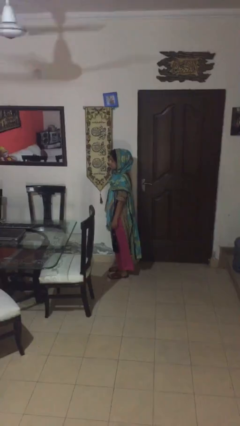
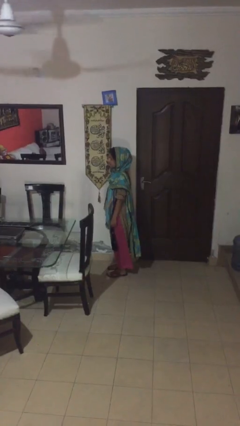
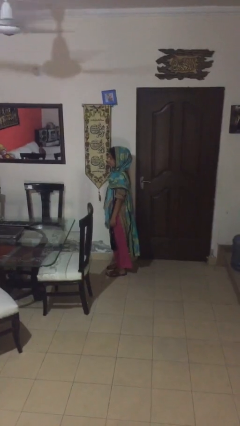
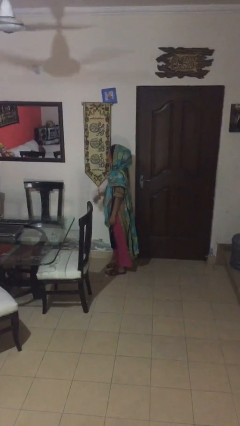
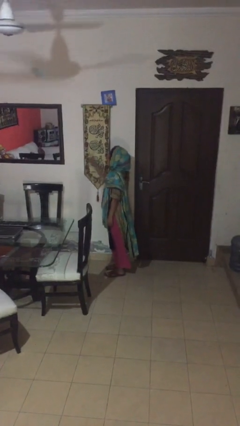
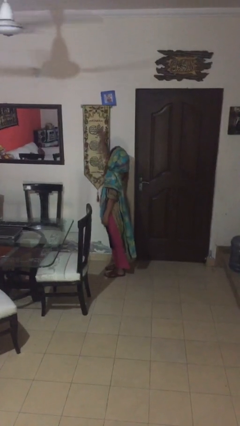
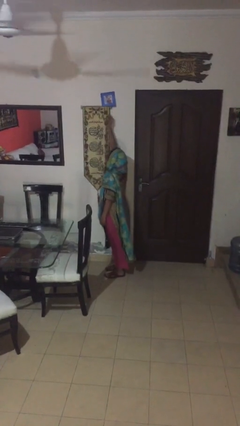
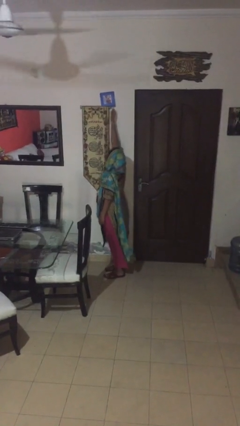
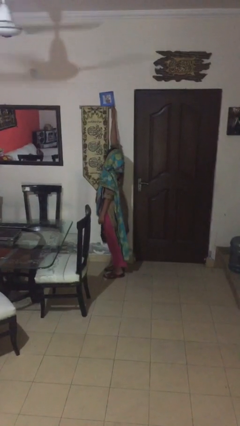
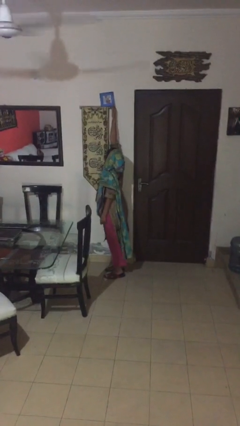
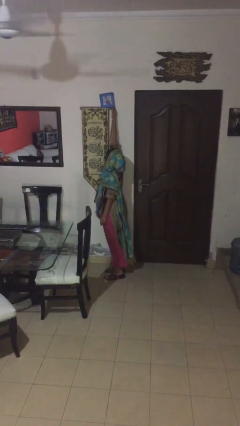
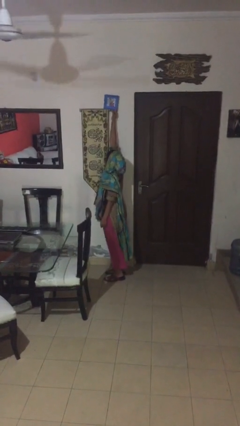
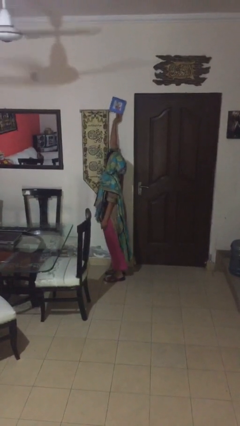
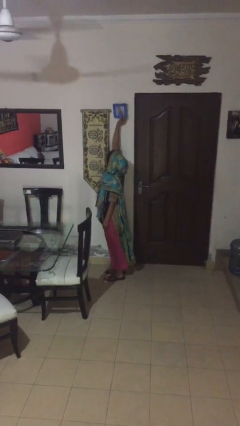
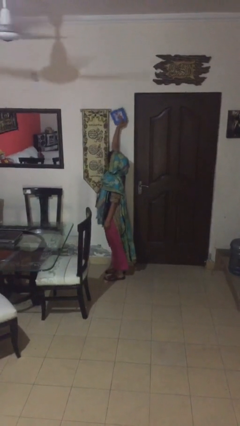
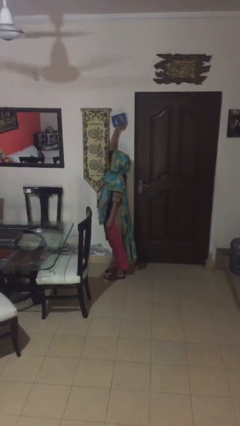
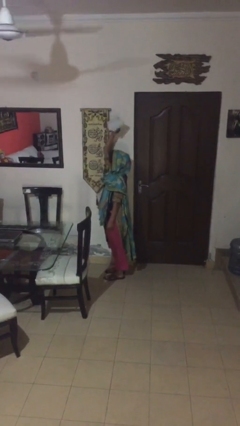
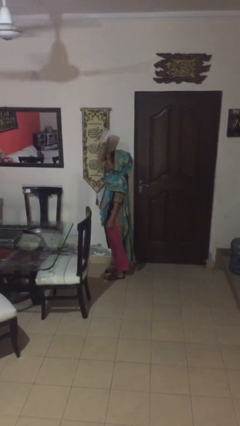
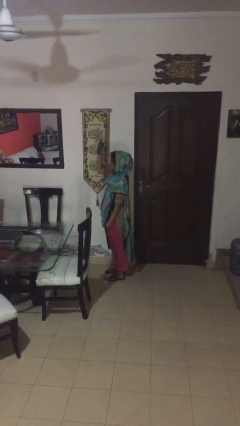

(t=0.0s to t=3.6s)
person picks up object from shelf

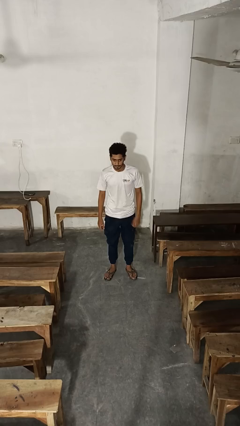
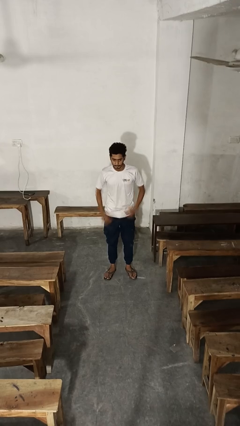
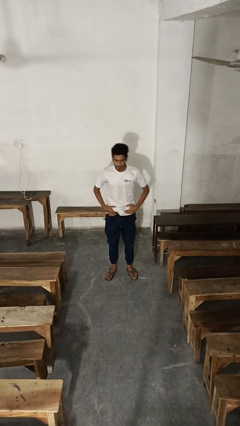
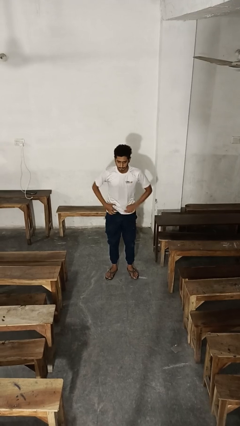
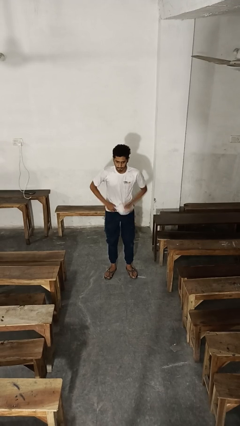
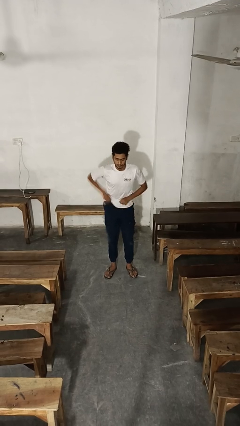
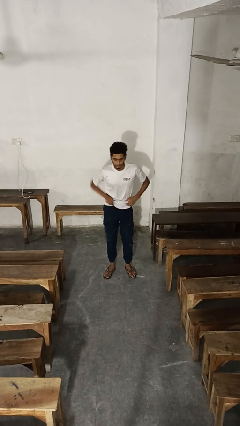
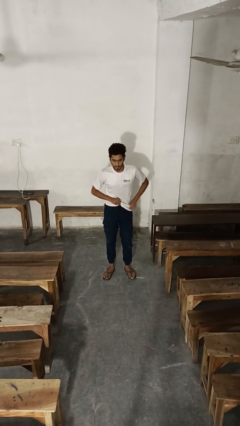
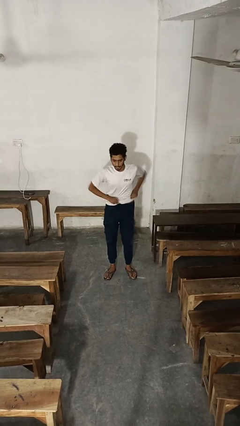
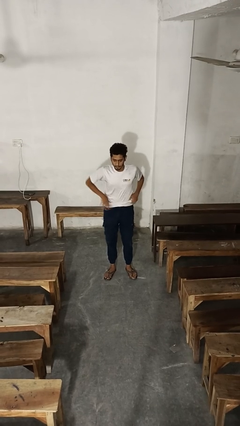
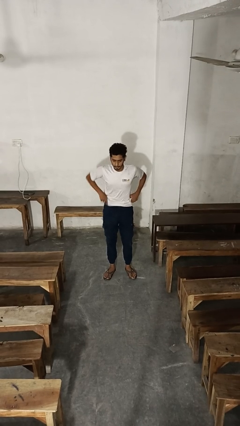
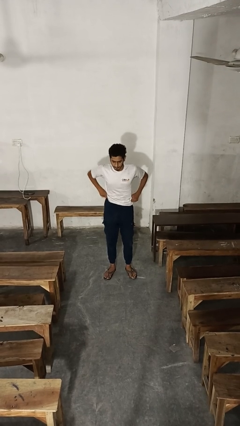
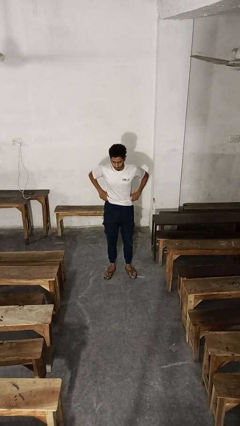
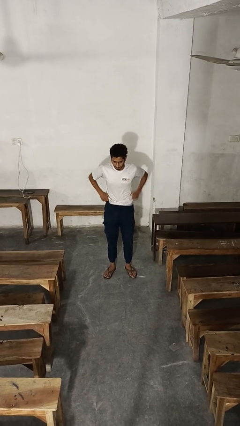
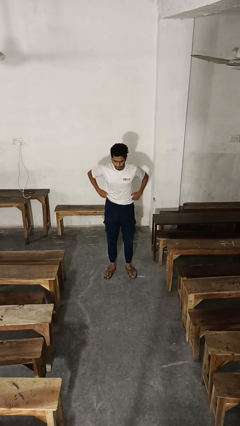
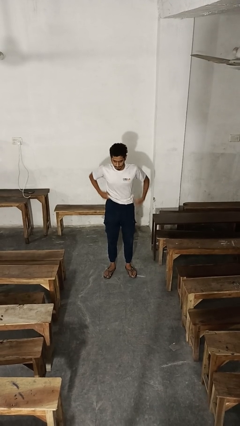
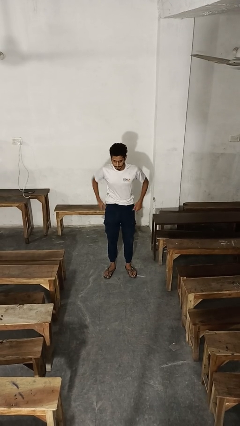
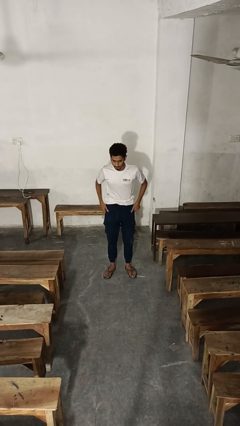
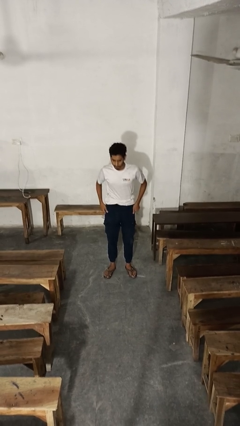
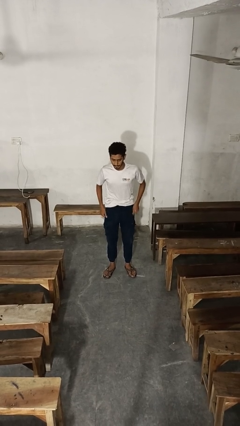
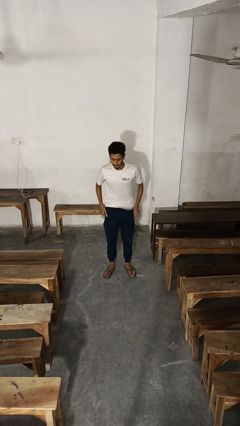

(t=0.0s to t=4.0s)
person hikes up pants

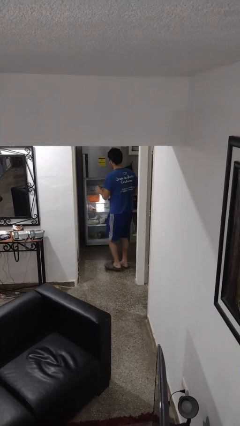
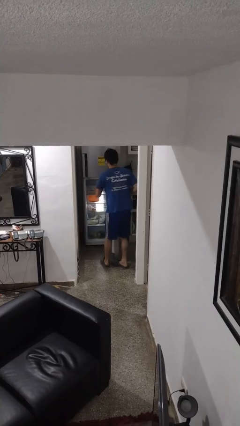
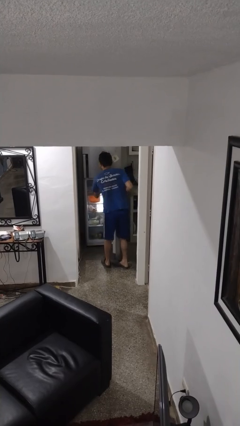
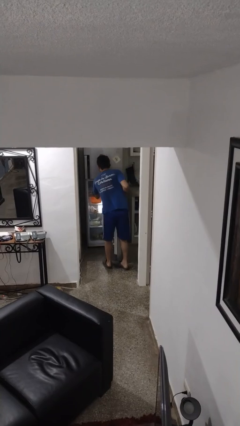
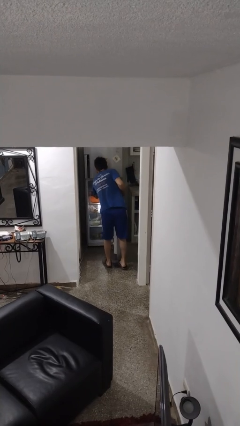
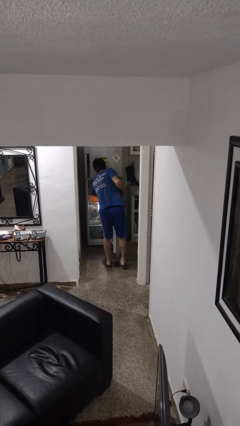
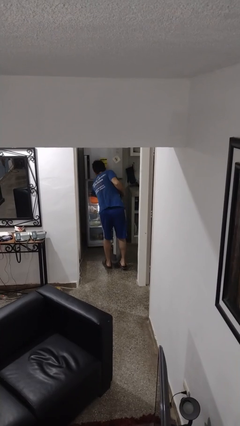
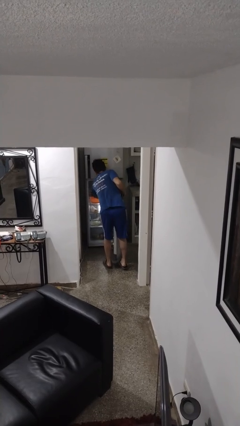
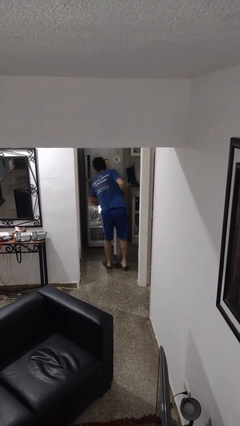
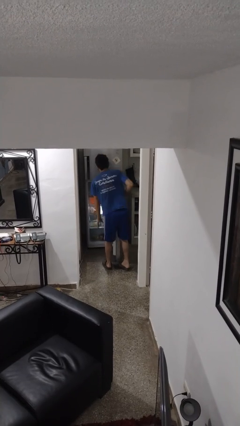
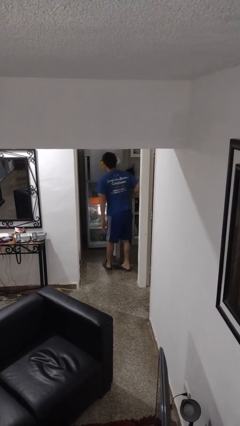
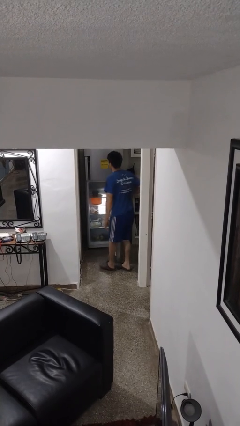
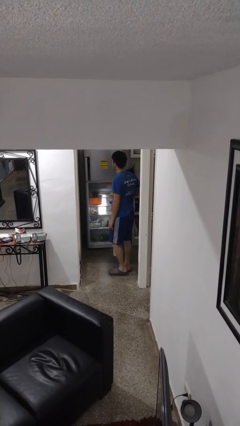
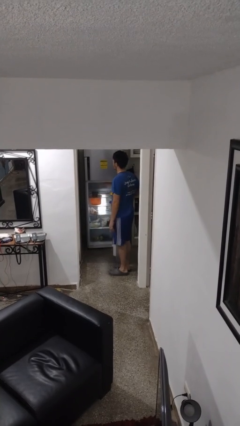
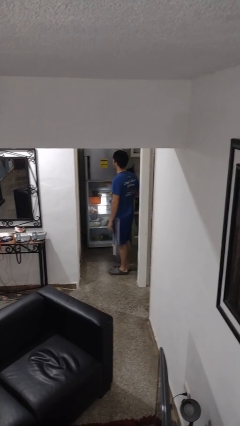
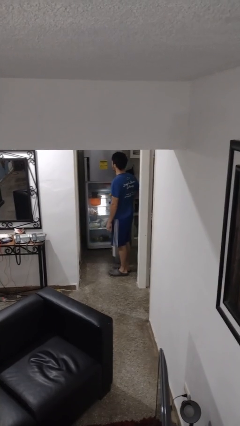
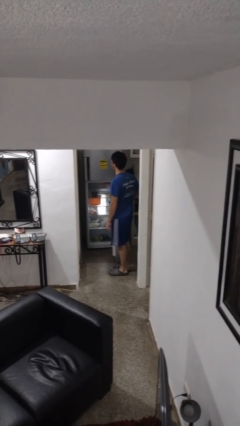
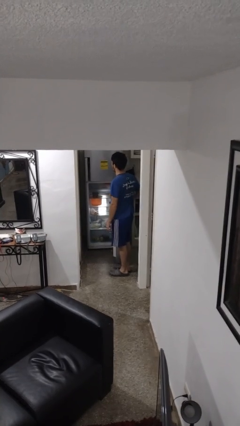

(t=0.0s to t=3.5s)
person puts object into refrigerator

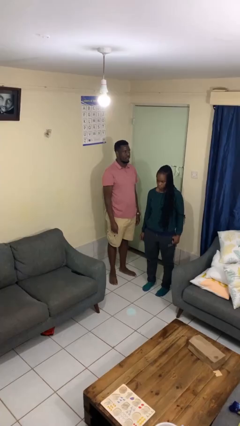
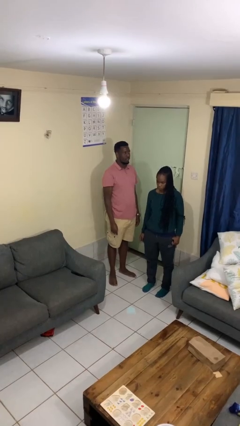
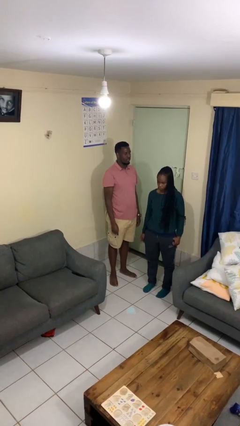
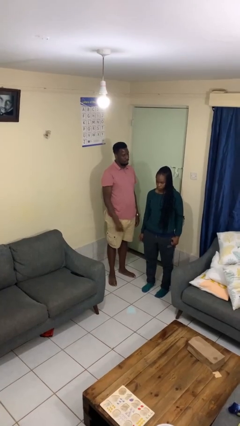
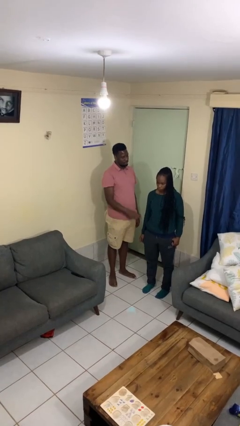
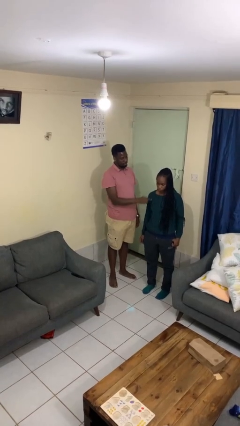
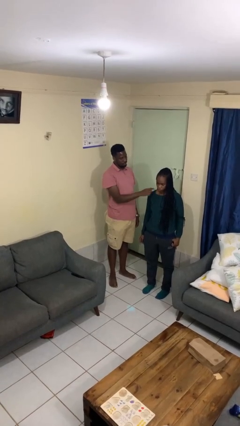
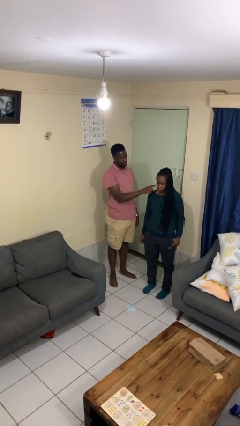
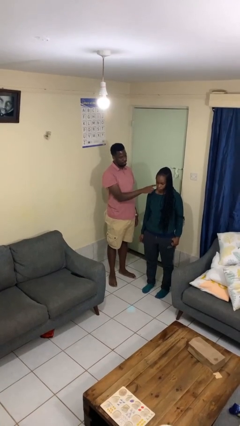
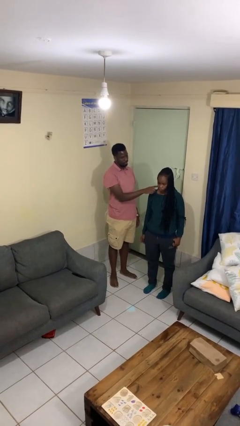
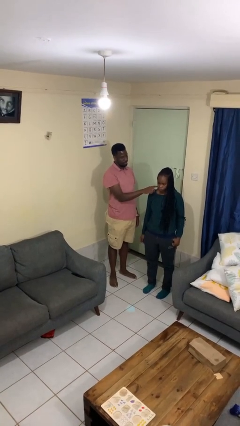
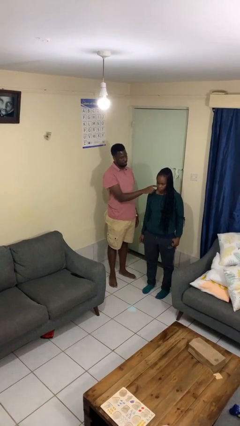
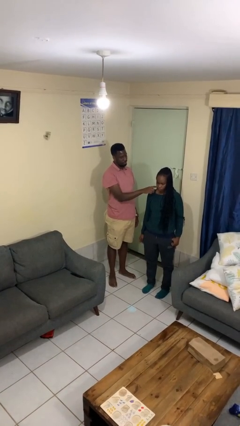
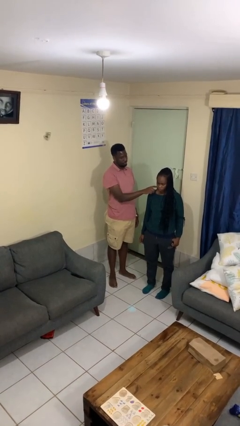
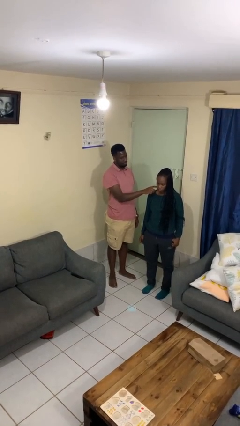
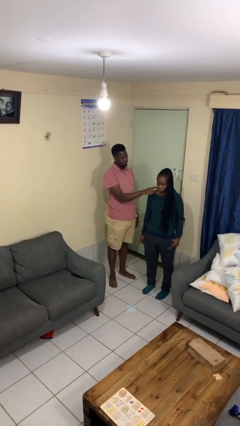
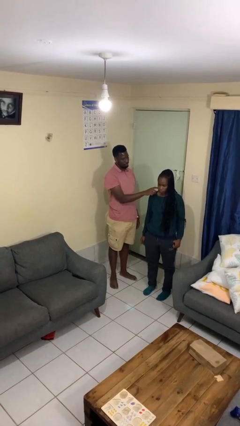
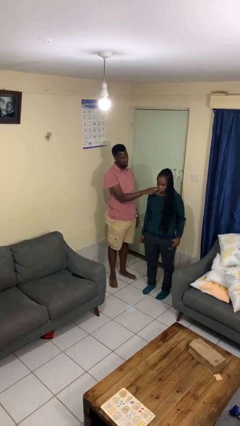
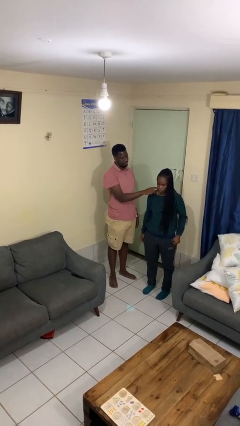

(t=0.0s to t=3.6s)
person touches face of person

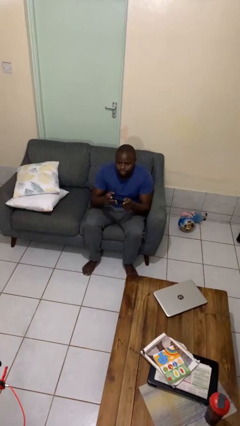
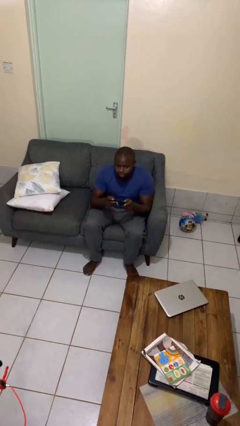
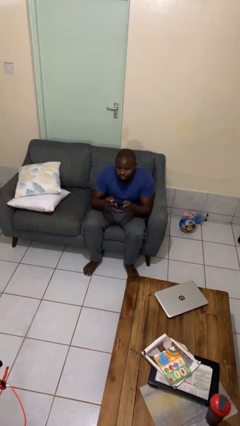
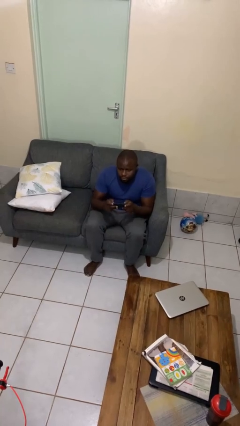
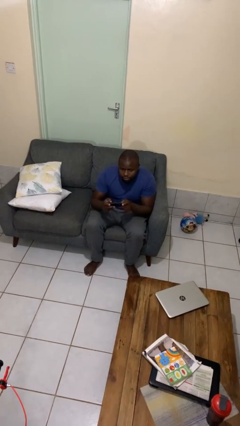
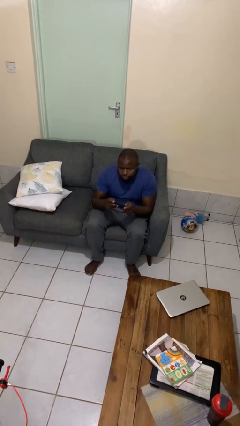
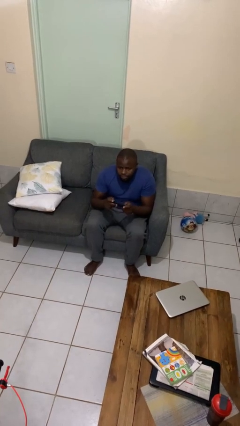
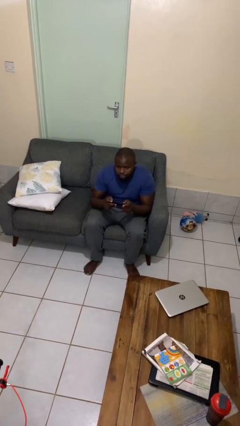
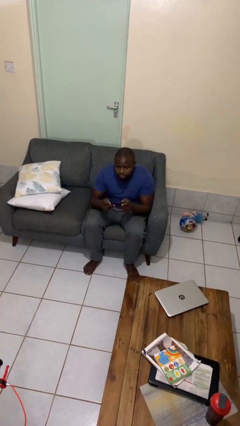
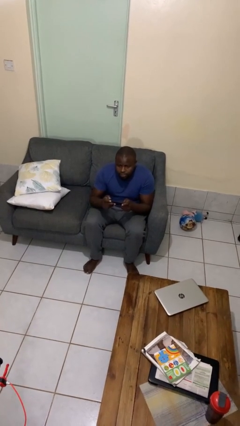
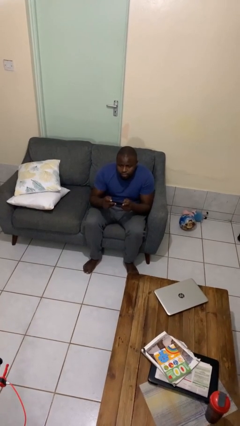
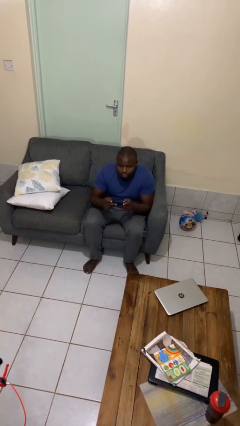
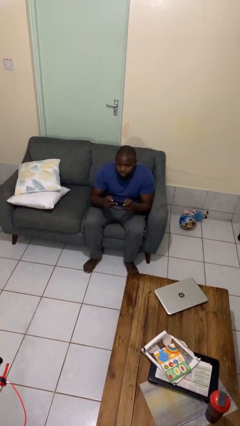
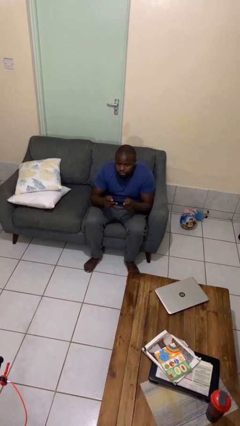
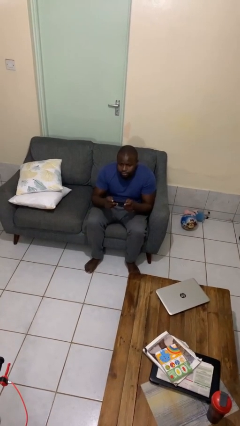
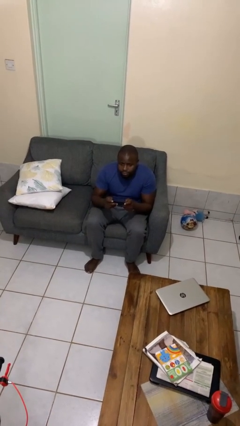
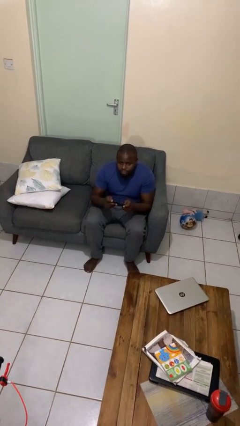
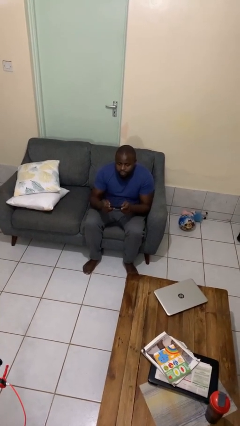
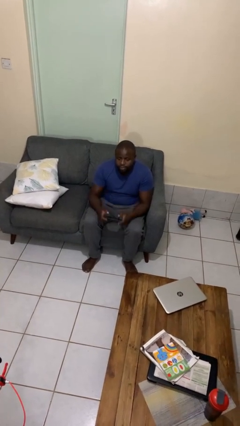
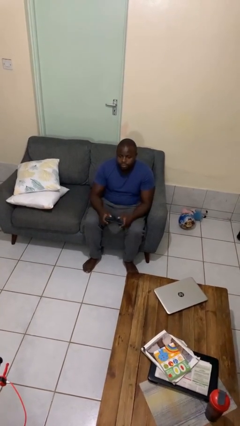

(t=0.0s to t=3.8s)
person interacts with handheld game
